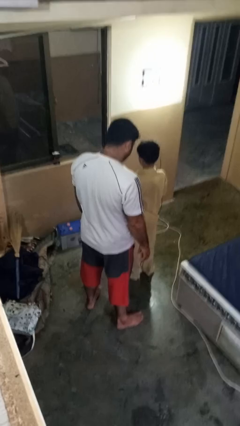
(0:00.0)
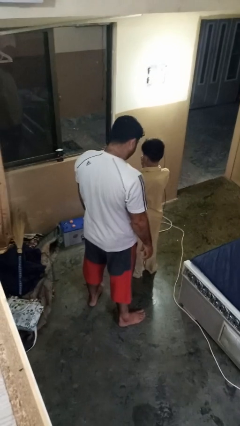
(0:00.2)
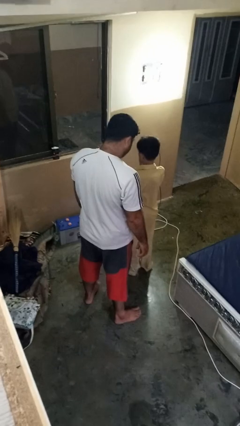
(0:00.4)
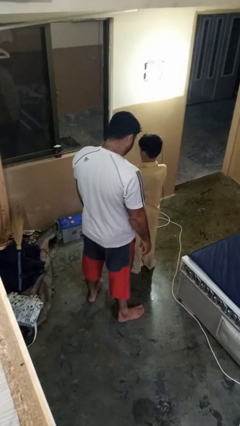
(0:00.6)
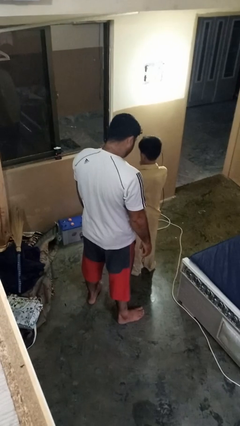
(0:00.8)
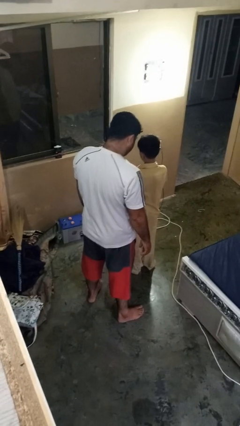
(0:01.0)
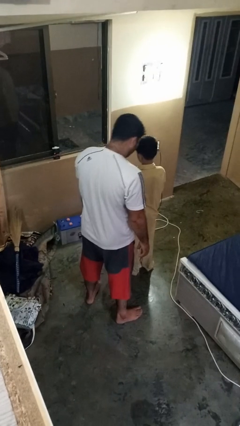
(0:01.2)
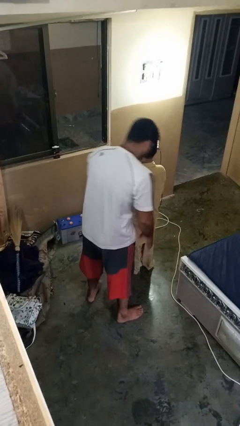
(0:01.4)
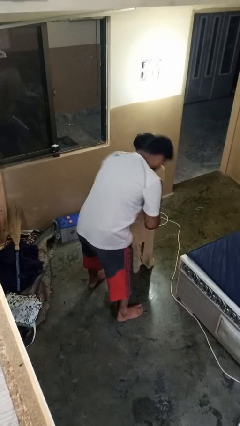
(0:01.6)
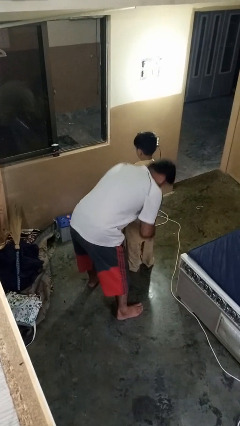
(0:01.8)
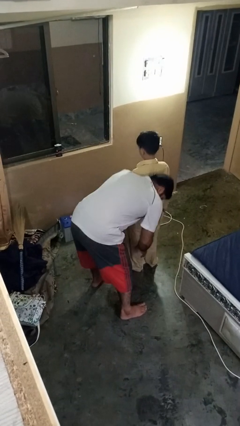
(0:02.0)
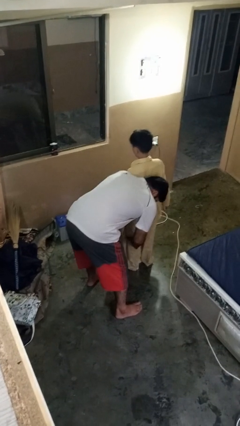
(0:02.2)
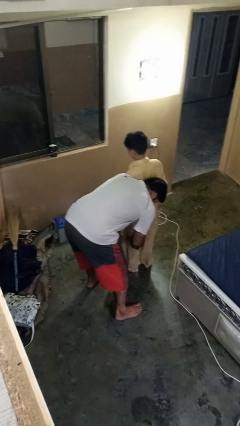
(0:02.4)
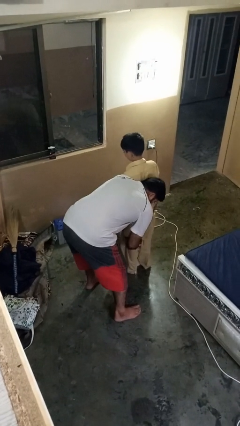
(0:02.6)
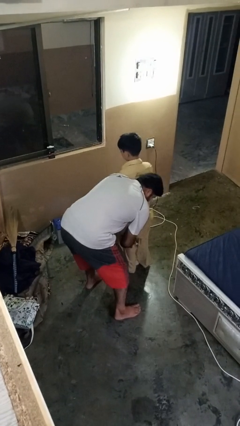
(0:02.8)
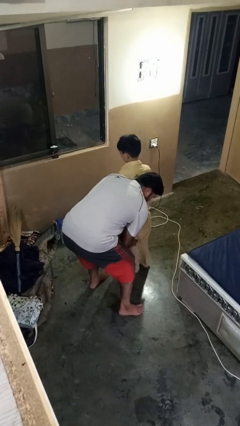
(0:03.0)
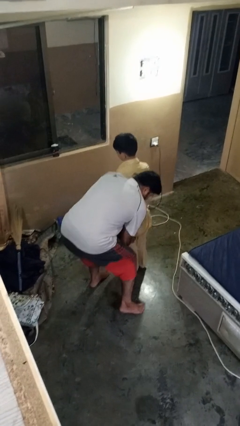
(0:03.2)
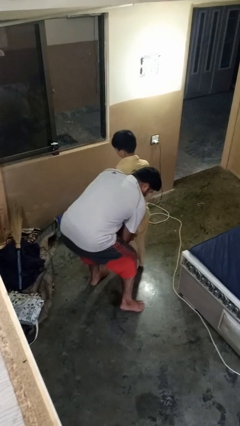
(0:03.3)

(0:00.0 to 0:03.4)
person picks up person

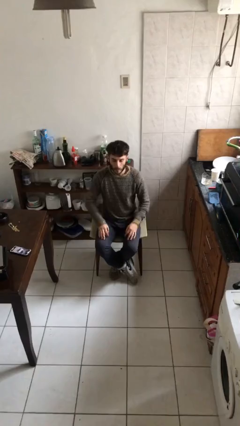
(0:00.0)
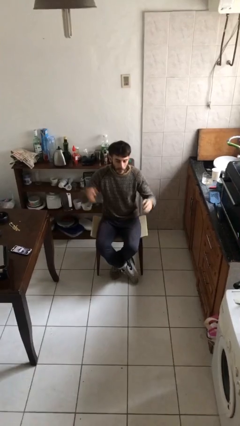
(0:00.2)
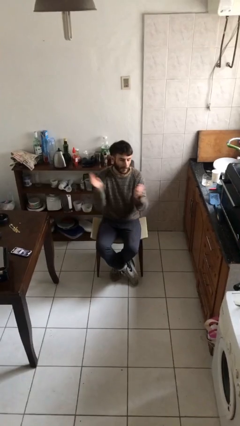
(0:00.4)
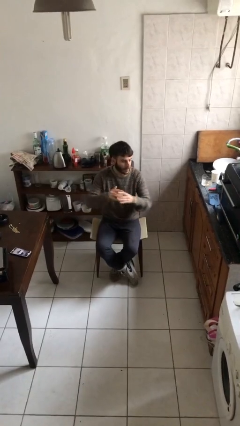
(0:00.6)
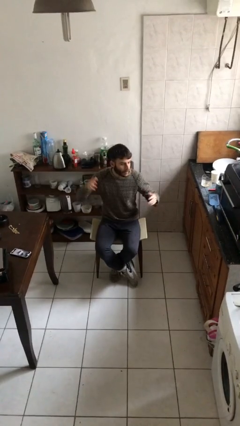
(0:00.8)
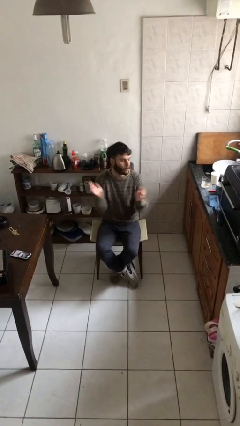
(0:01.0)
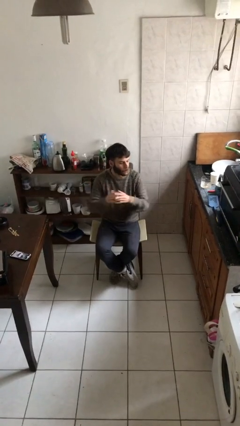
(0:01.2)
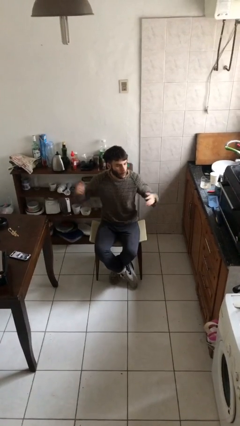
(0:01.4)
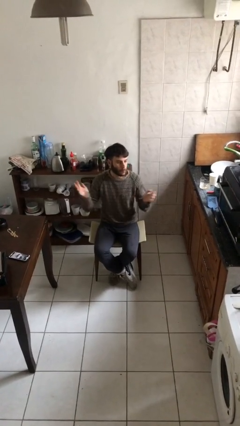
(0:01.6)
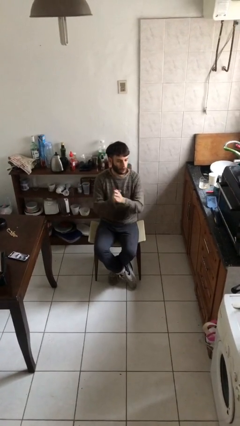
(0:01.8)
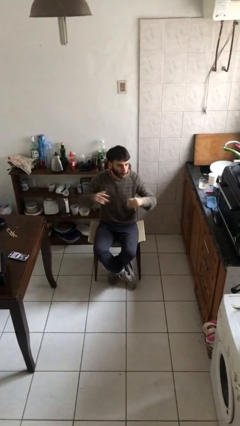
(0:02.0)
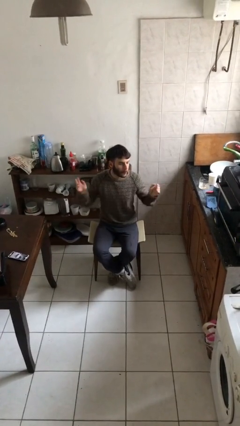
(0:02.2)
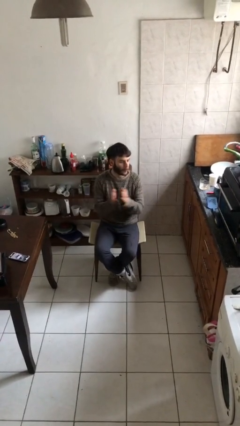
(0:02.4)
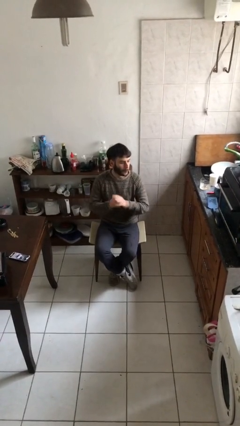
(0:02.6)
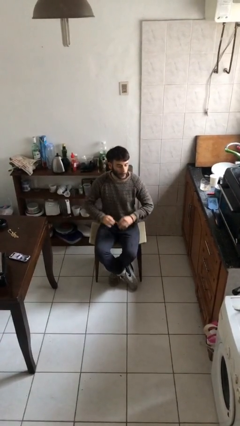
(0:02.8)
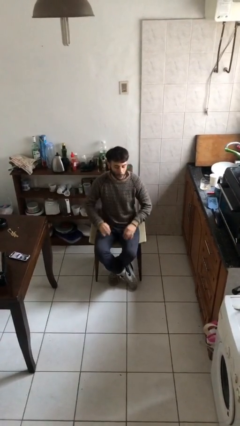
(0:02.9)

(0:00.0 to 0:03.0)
person claps hands

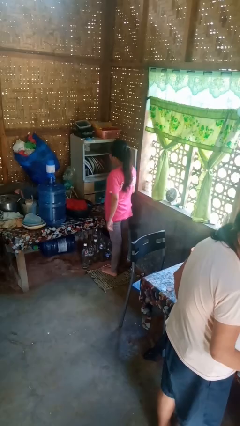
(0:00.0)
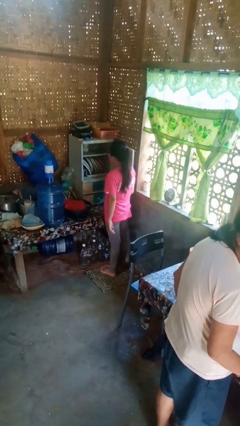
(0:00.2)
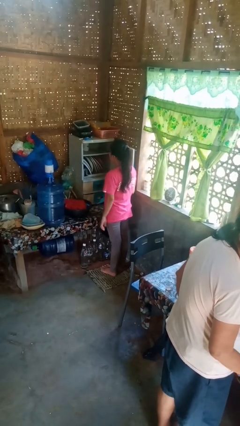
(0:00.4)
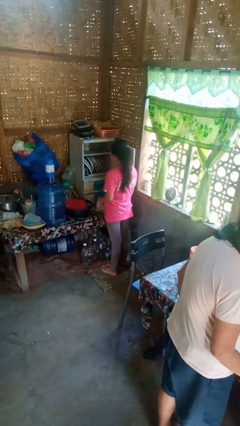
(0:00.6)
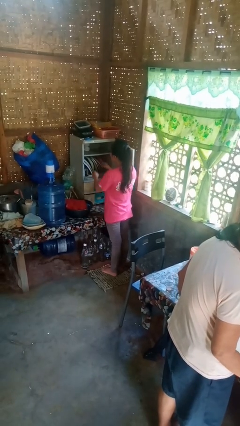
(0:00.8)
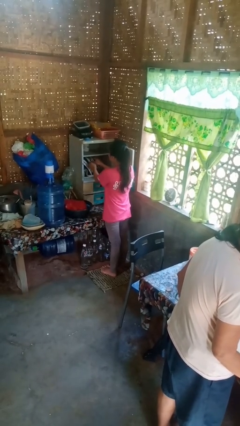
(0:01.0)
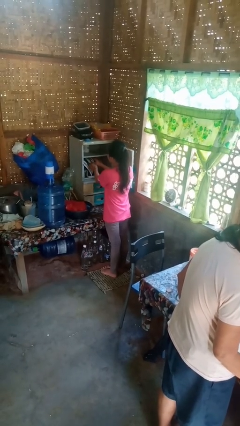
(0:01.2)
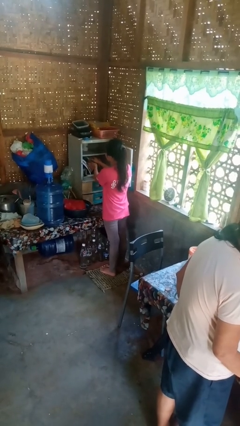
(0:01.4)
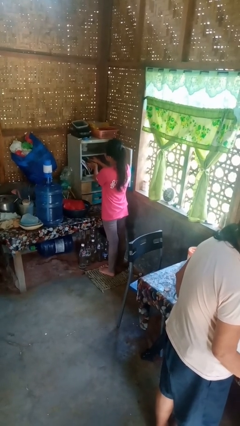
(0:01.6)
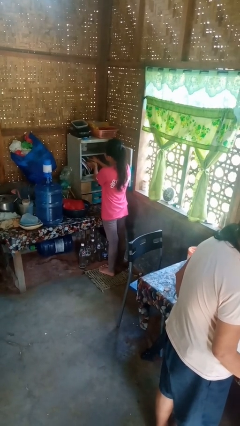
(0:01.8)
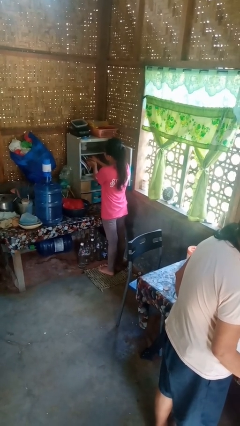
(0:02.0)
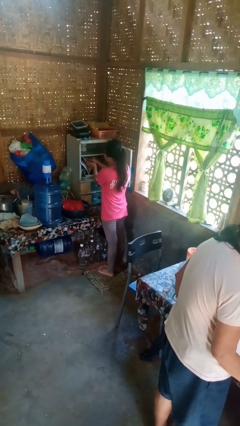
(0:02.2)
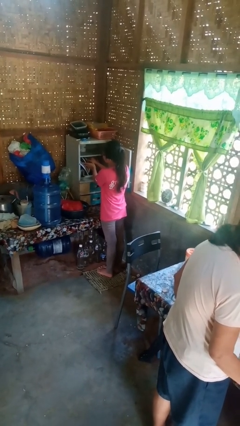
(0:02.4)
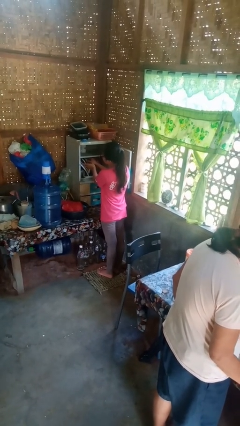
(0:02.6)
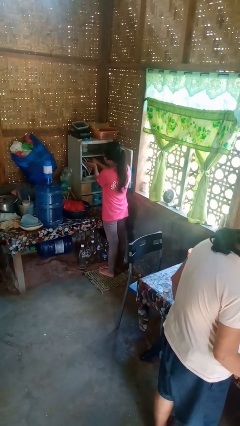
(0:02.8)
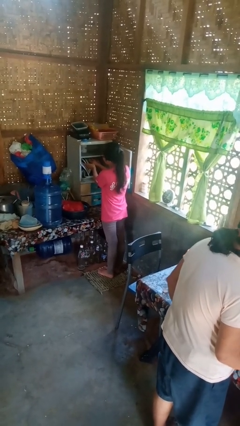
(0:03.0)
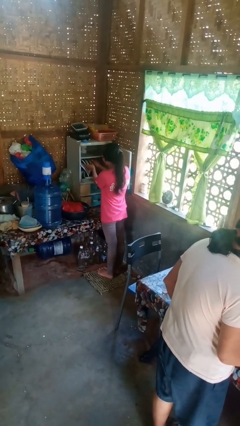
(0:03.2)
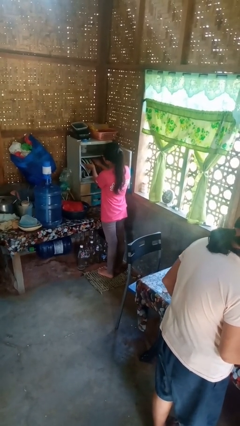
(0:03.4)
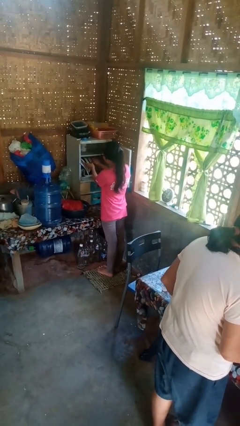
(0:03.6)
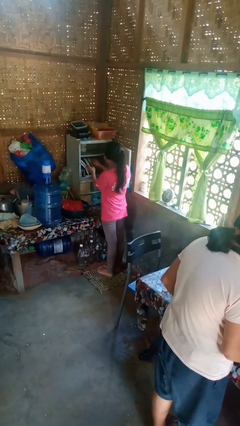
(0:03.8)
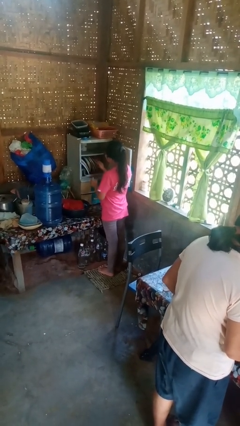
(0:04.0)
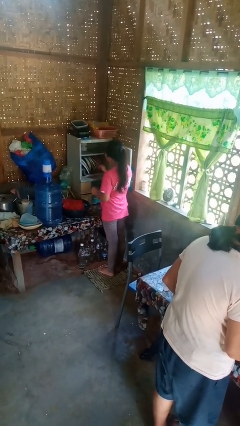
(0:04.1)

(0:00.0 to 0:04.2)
person searches in cabinet

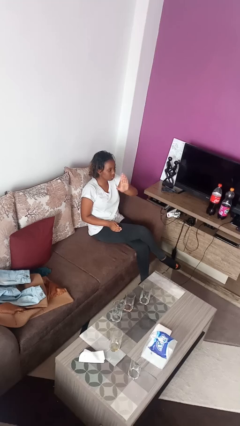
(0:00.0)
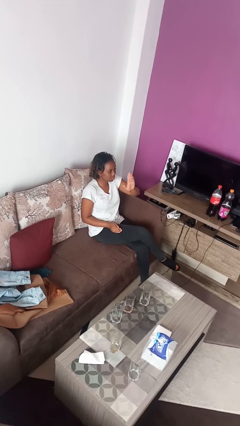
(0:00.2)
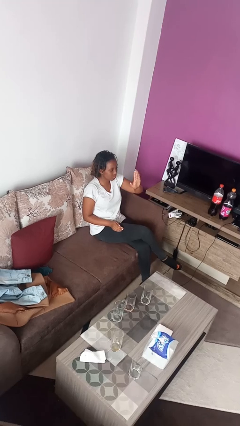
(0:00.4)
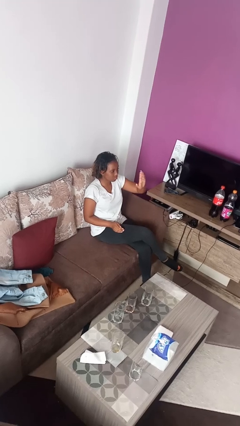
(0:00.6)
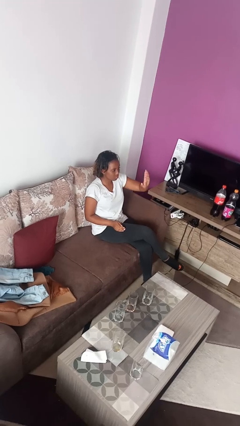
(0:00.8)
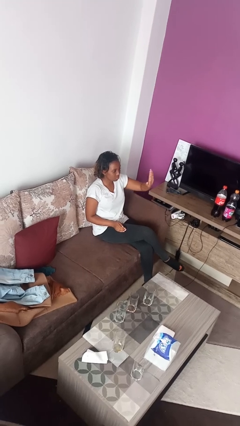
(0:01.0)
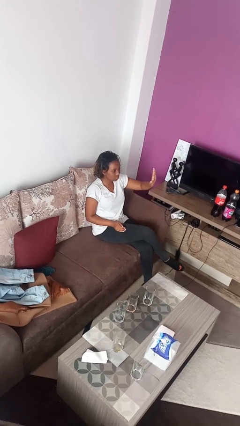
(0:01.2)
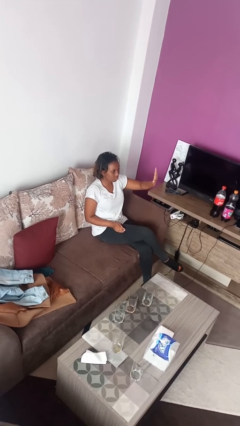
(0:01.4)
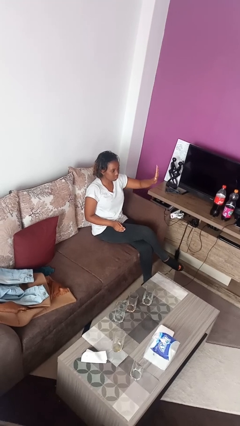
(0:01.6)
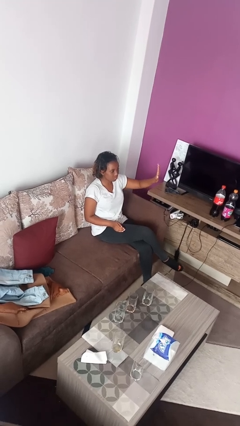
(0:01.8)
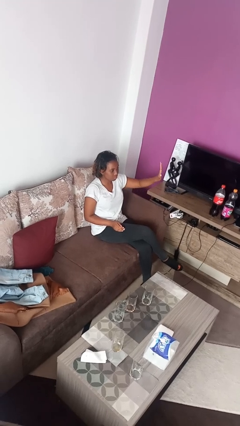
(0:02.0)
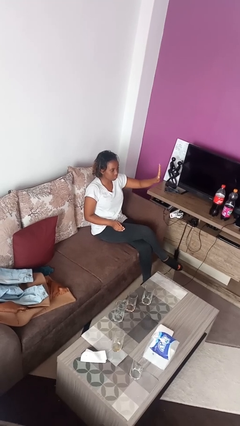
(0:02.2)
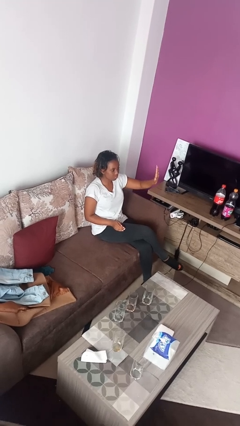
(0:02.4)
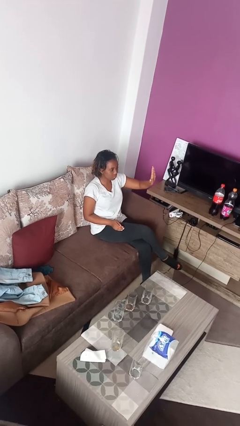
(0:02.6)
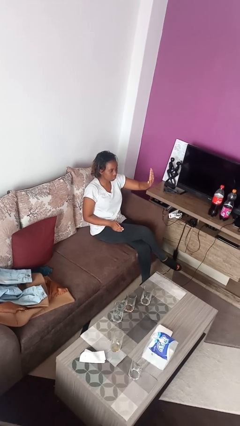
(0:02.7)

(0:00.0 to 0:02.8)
person gestures swipe left

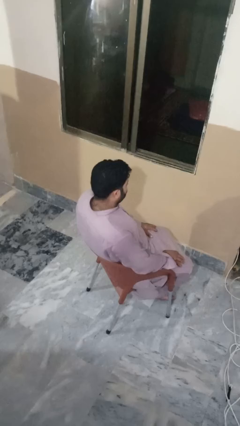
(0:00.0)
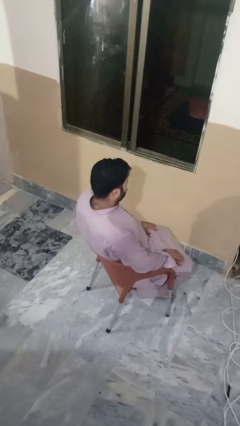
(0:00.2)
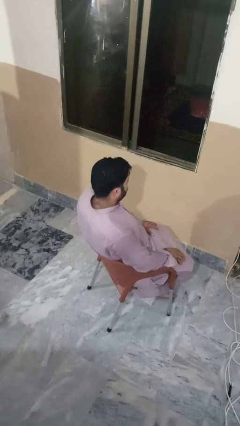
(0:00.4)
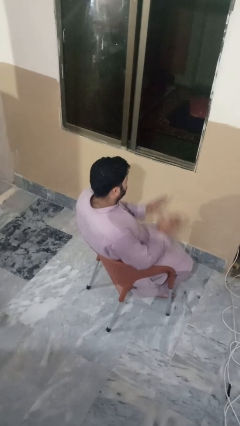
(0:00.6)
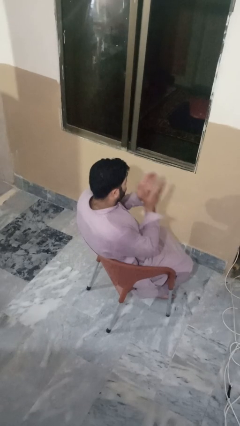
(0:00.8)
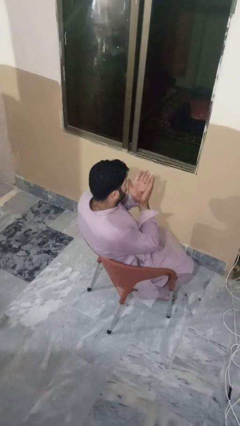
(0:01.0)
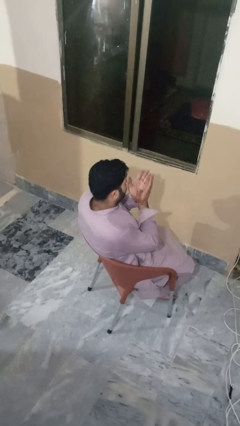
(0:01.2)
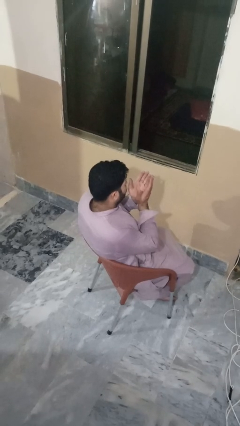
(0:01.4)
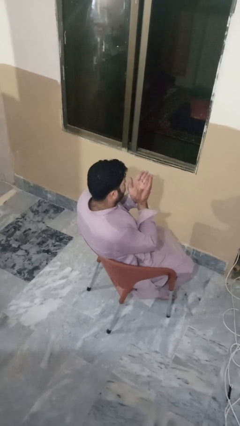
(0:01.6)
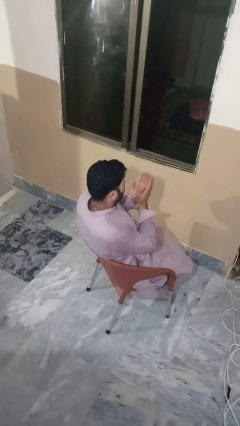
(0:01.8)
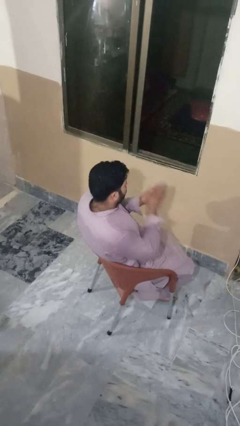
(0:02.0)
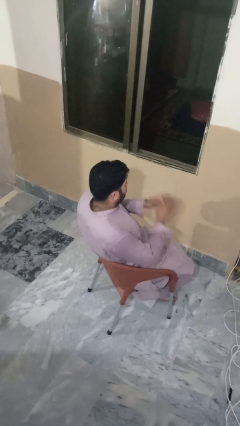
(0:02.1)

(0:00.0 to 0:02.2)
person prays

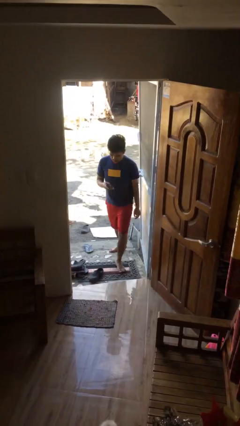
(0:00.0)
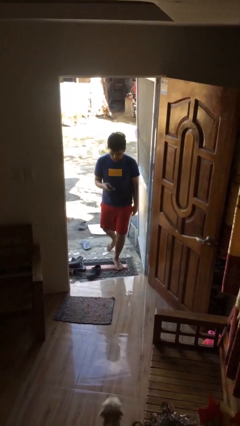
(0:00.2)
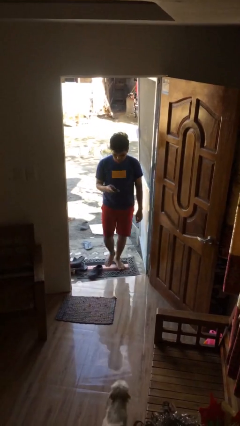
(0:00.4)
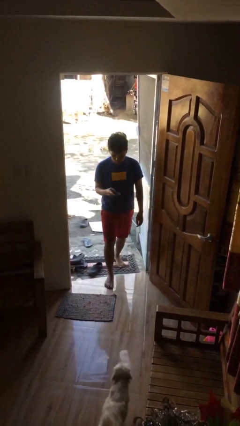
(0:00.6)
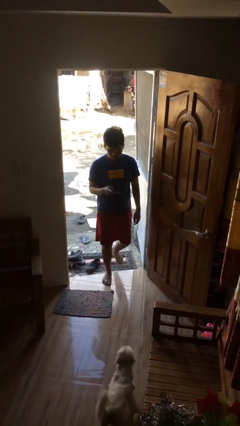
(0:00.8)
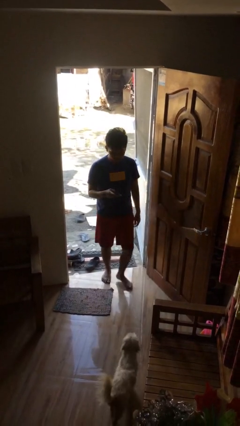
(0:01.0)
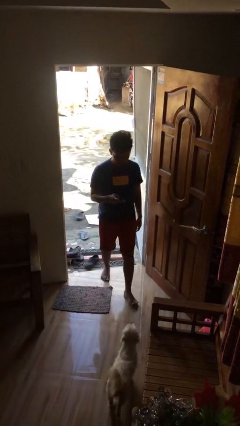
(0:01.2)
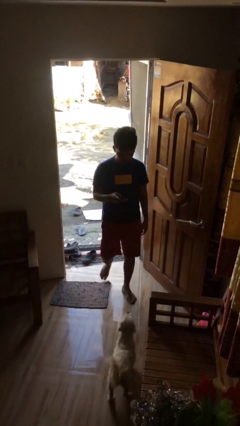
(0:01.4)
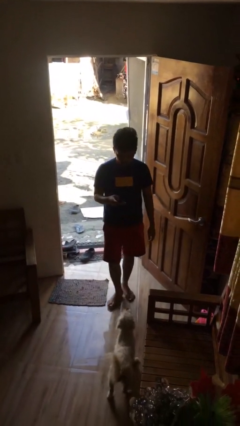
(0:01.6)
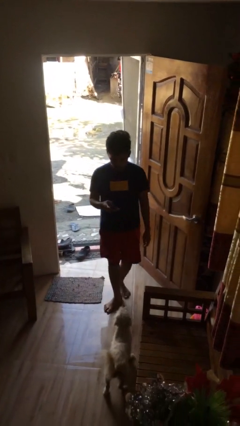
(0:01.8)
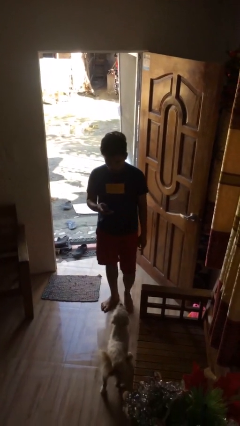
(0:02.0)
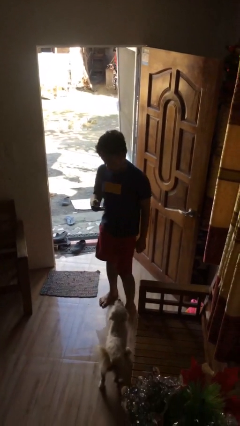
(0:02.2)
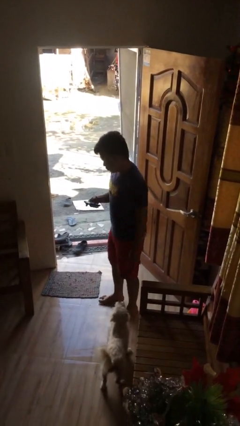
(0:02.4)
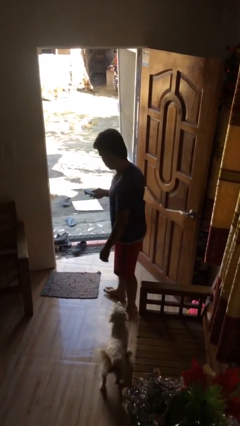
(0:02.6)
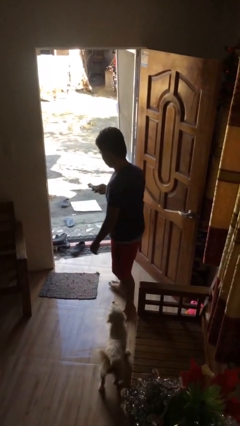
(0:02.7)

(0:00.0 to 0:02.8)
person enters scene through structure
